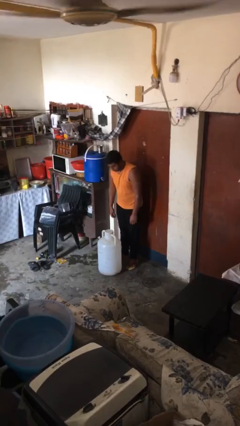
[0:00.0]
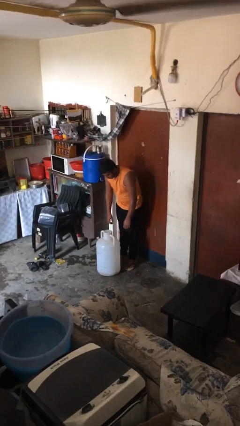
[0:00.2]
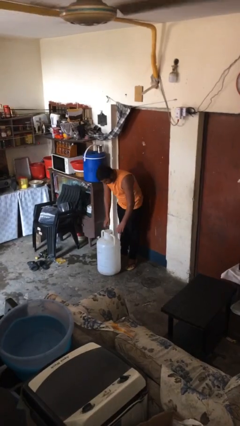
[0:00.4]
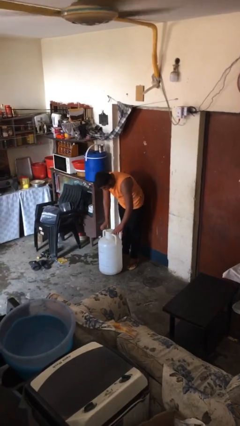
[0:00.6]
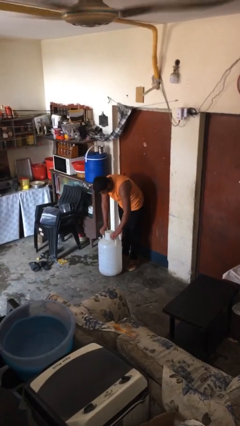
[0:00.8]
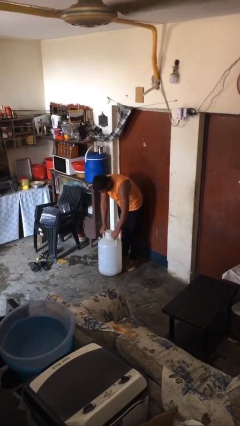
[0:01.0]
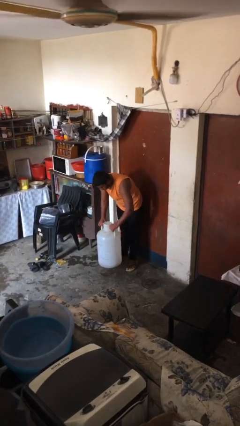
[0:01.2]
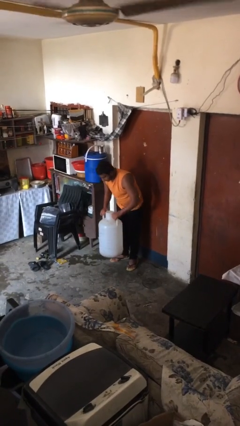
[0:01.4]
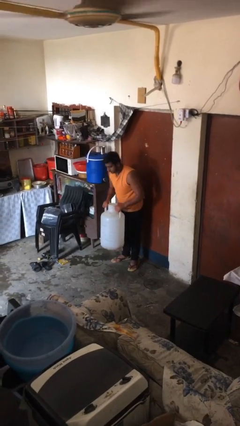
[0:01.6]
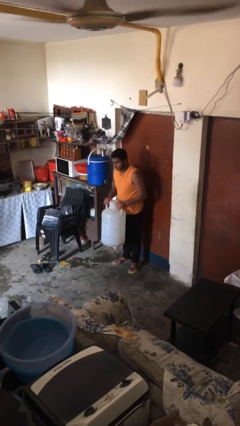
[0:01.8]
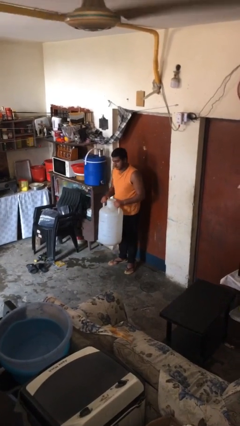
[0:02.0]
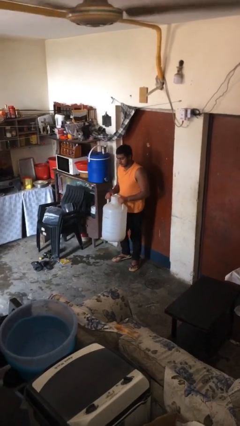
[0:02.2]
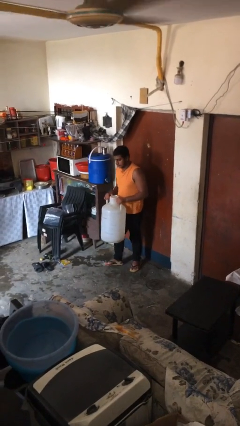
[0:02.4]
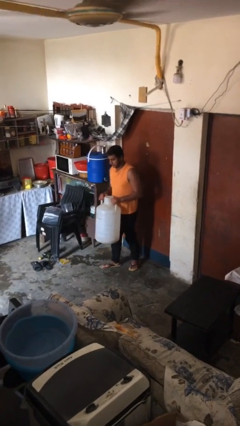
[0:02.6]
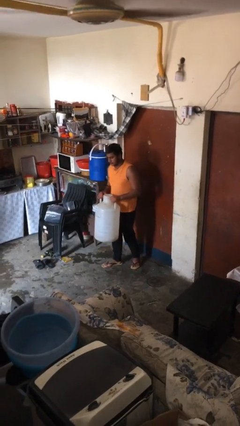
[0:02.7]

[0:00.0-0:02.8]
person picks up object from floor

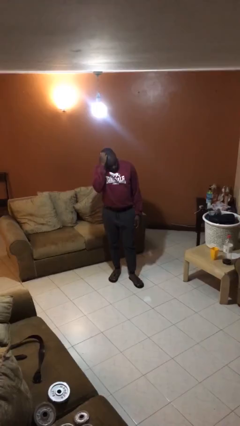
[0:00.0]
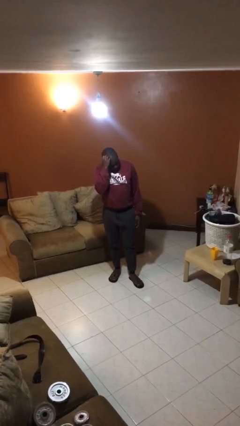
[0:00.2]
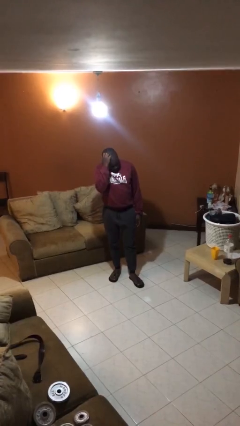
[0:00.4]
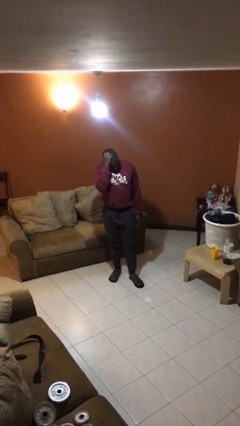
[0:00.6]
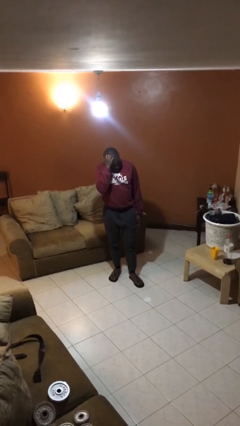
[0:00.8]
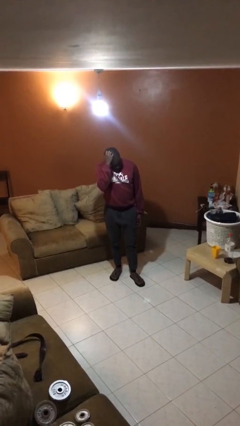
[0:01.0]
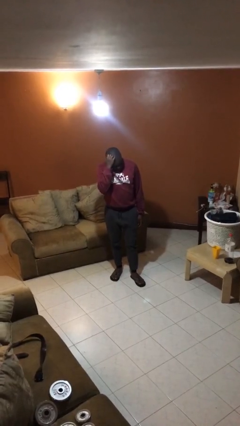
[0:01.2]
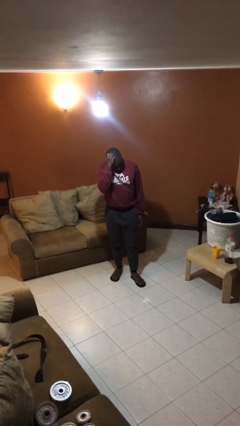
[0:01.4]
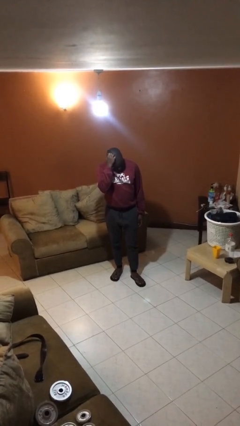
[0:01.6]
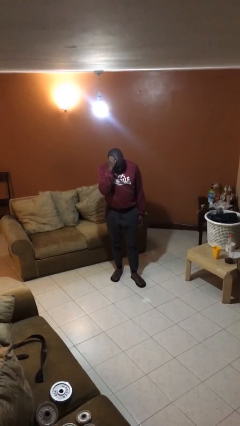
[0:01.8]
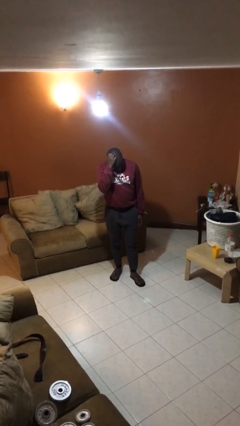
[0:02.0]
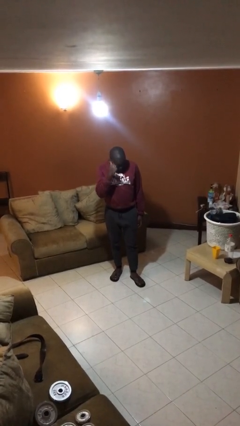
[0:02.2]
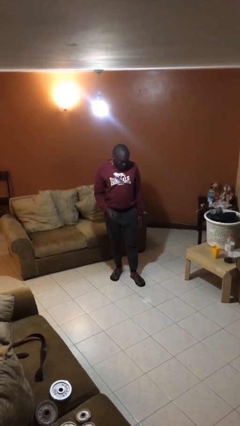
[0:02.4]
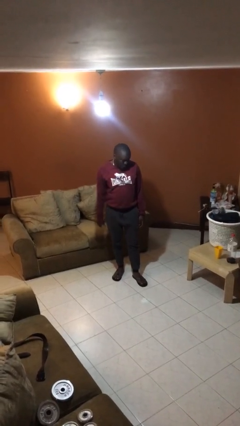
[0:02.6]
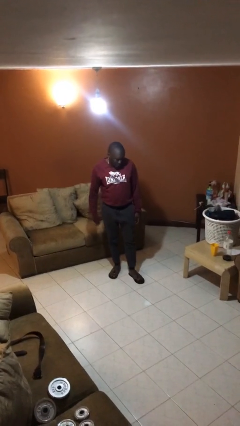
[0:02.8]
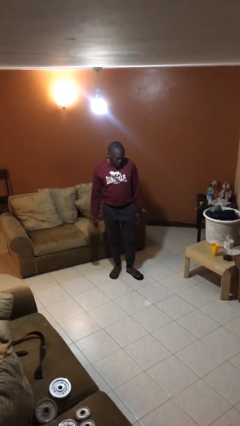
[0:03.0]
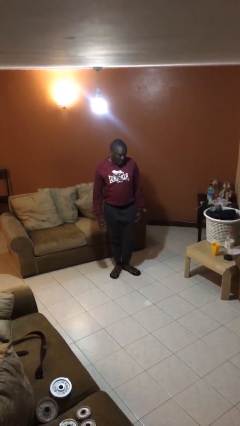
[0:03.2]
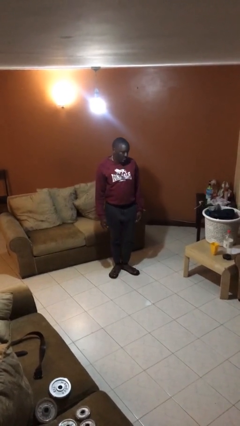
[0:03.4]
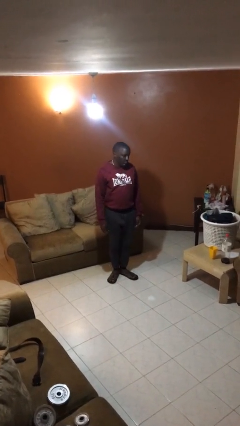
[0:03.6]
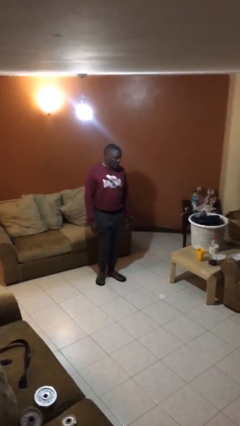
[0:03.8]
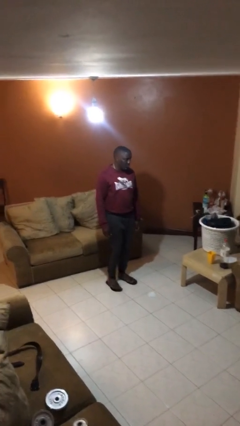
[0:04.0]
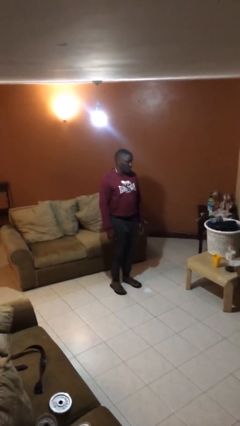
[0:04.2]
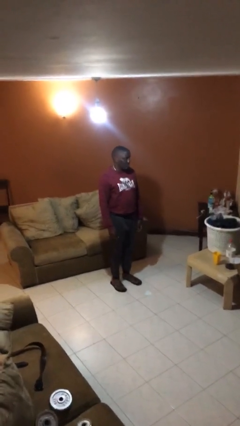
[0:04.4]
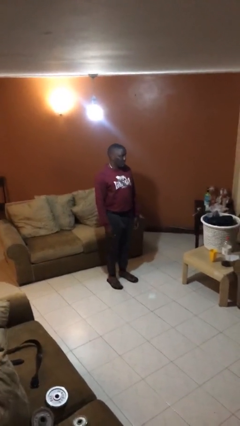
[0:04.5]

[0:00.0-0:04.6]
person scratches face

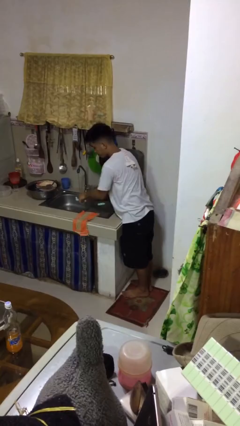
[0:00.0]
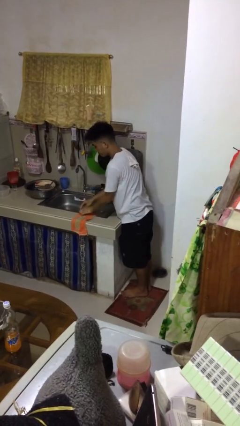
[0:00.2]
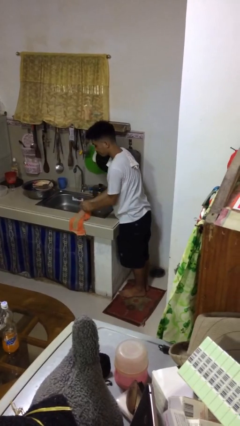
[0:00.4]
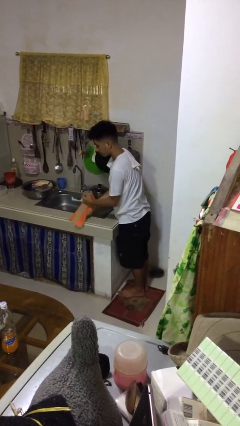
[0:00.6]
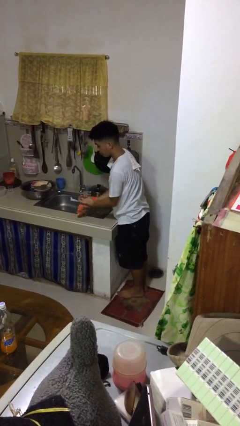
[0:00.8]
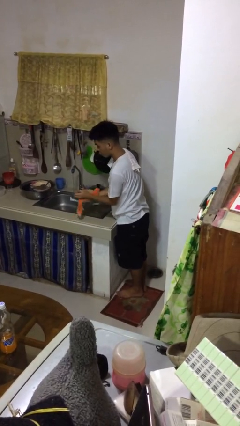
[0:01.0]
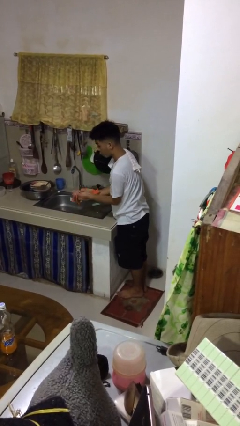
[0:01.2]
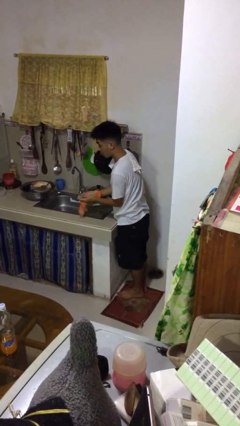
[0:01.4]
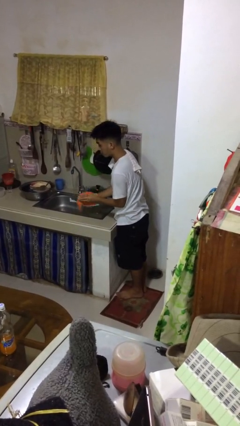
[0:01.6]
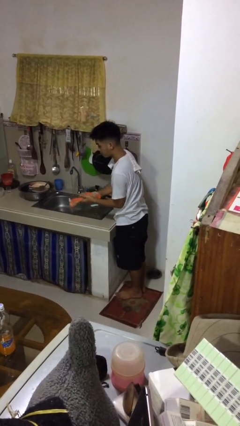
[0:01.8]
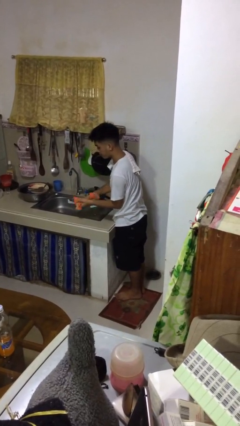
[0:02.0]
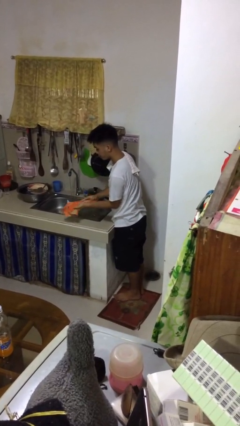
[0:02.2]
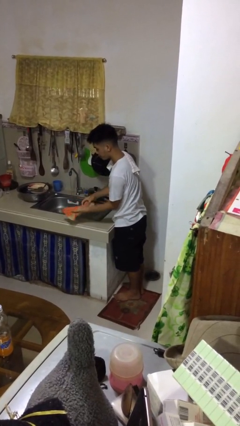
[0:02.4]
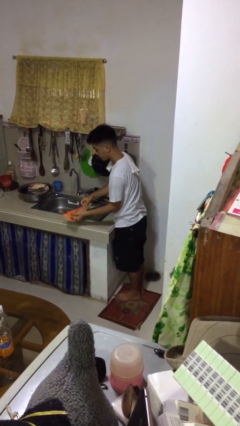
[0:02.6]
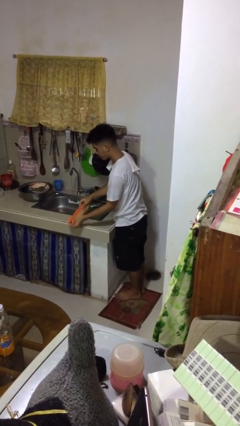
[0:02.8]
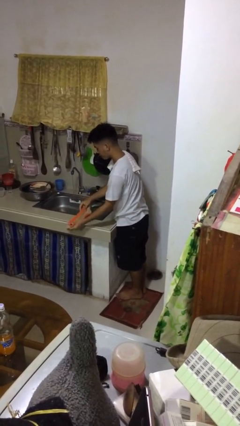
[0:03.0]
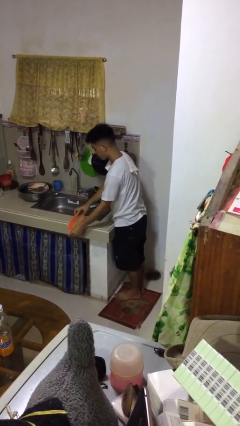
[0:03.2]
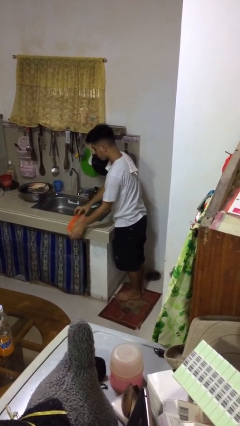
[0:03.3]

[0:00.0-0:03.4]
person dries hands with towel

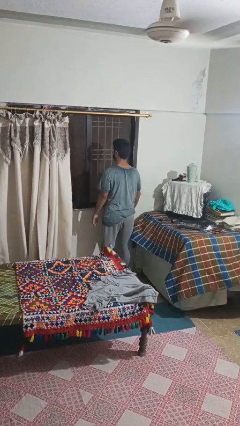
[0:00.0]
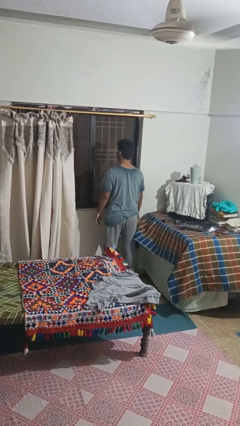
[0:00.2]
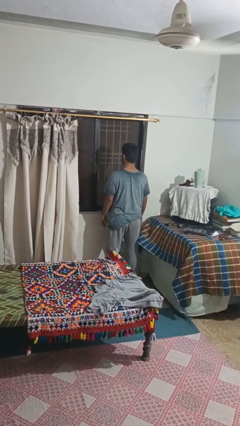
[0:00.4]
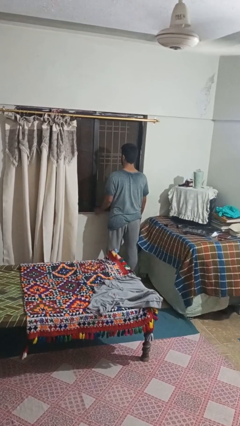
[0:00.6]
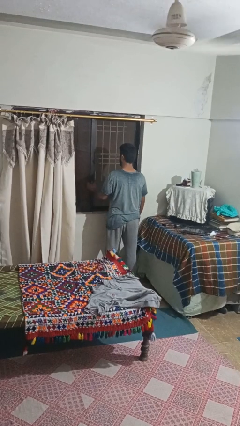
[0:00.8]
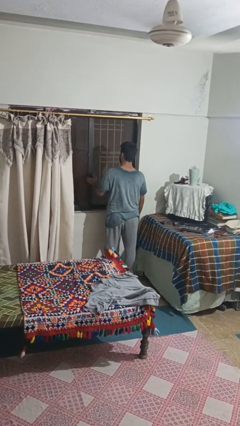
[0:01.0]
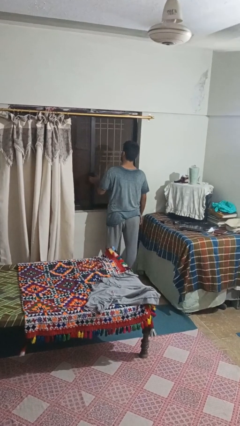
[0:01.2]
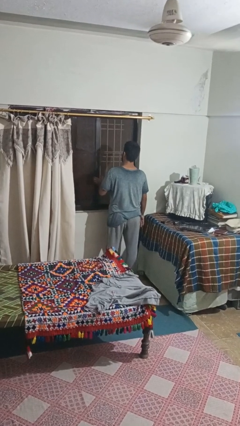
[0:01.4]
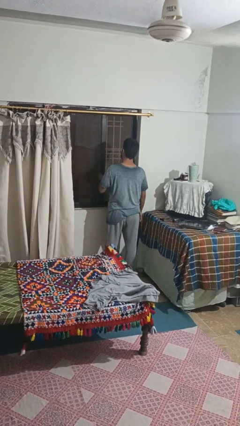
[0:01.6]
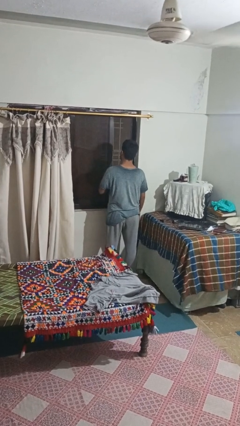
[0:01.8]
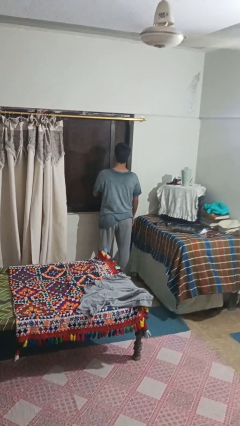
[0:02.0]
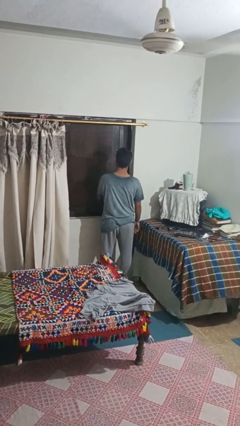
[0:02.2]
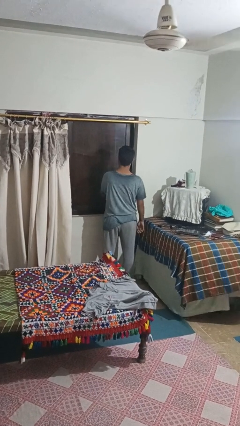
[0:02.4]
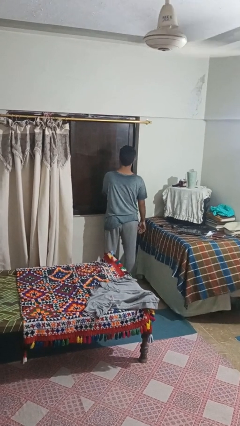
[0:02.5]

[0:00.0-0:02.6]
person closes home window

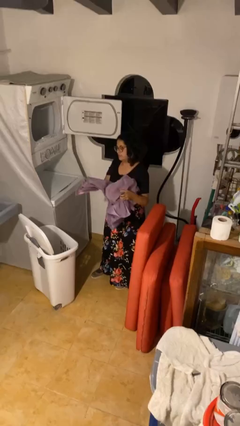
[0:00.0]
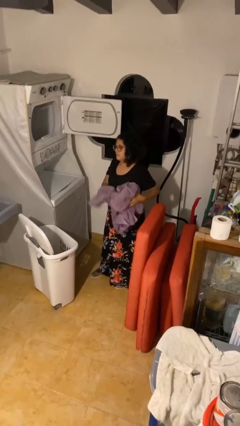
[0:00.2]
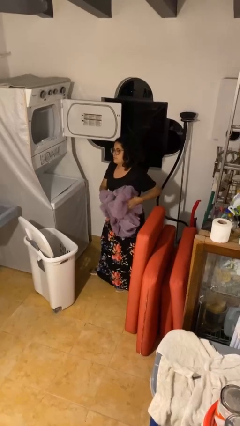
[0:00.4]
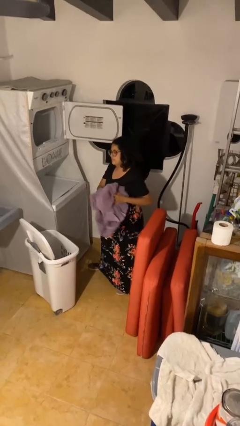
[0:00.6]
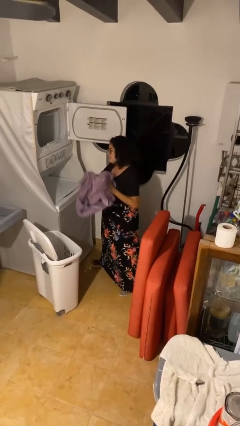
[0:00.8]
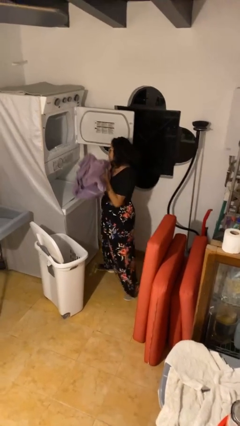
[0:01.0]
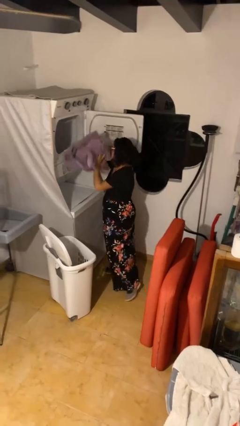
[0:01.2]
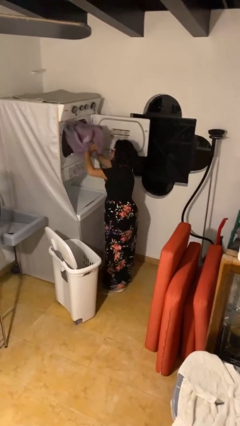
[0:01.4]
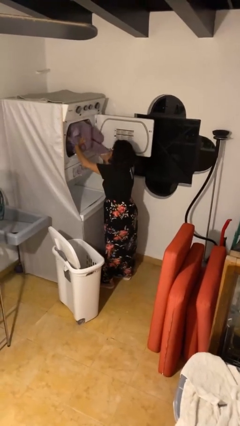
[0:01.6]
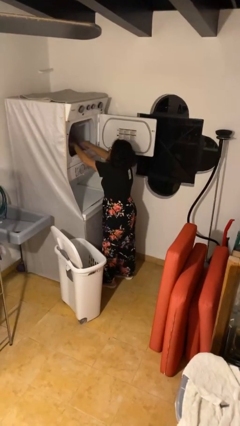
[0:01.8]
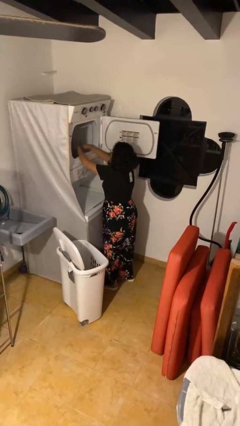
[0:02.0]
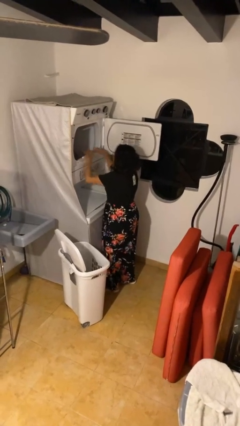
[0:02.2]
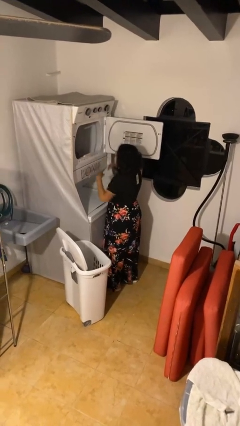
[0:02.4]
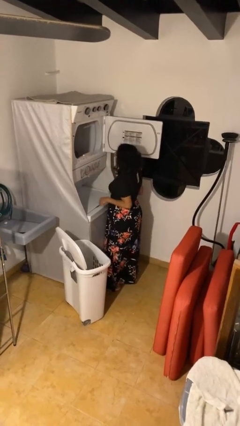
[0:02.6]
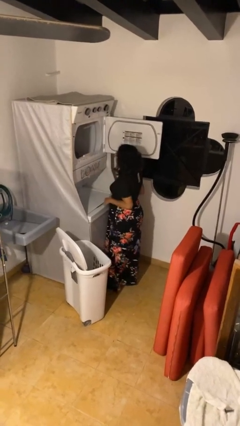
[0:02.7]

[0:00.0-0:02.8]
person loads dryer

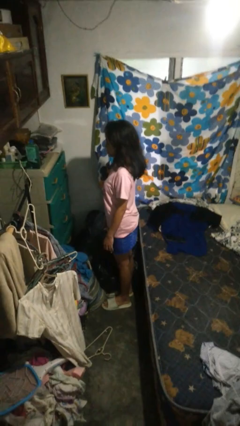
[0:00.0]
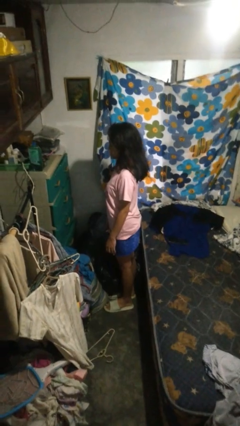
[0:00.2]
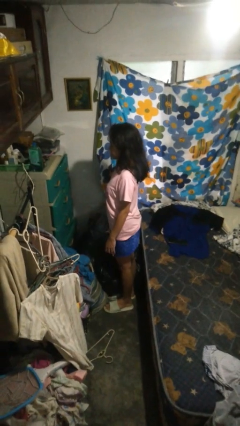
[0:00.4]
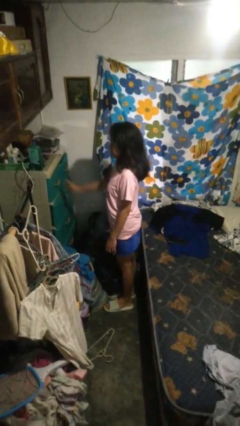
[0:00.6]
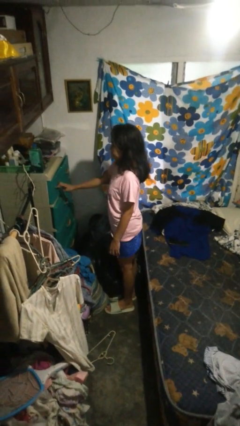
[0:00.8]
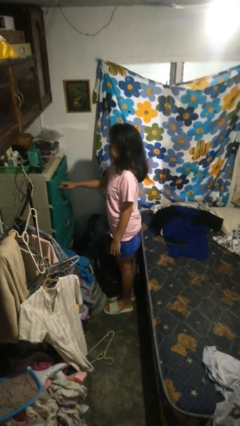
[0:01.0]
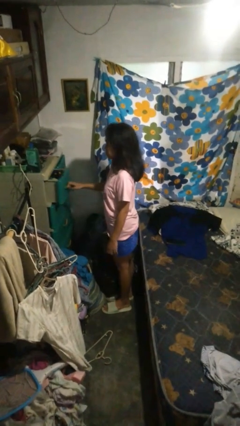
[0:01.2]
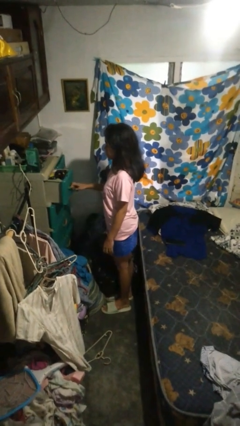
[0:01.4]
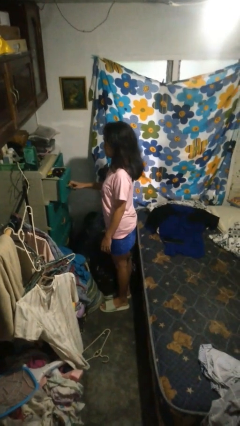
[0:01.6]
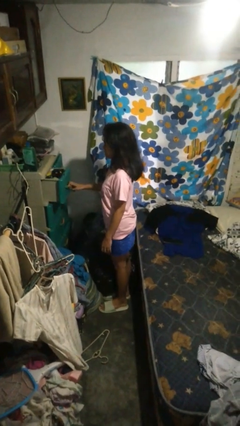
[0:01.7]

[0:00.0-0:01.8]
person opens dresser drawer
